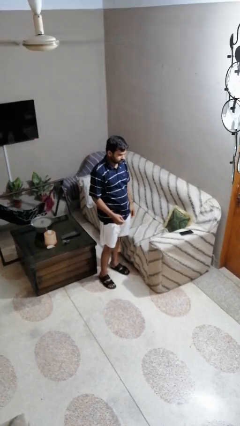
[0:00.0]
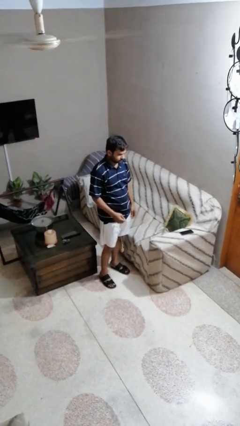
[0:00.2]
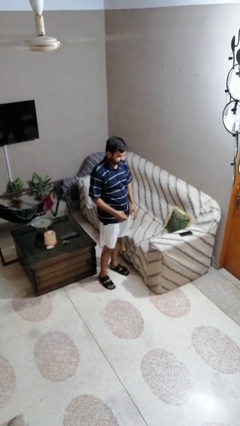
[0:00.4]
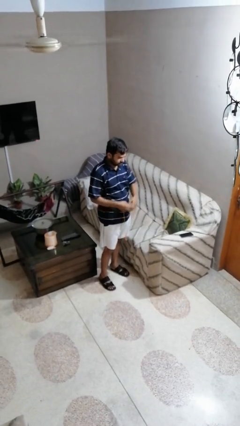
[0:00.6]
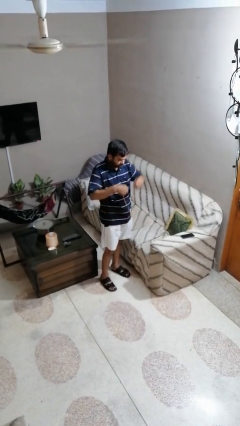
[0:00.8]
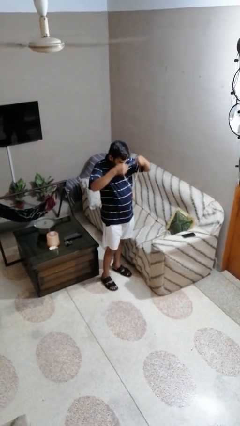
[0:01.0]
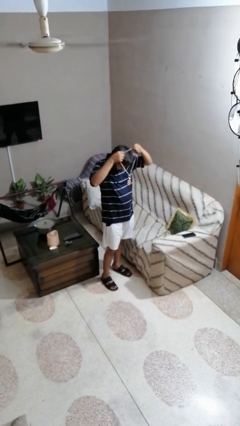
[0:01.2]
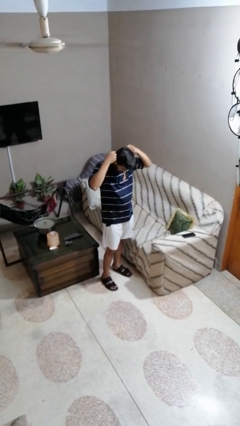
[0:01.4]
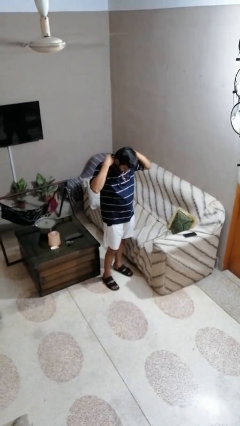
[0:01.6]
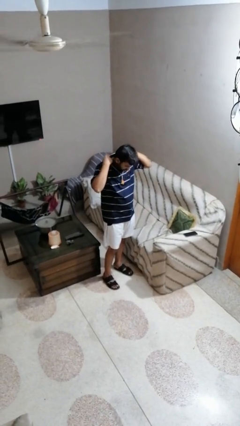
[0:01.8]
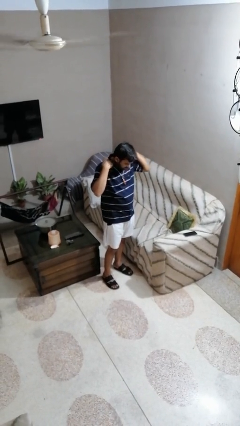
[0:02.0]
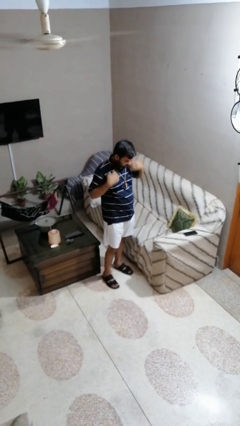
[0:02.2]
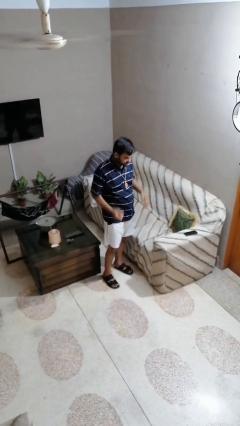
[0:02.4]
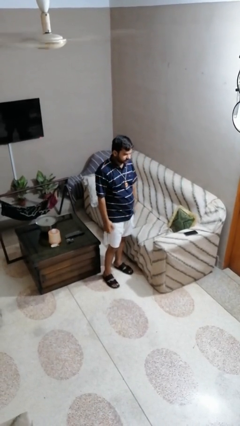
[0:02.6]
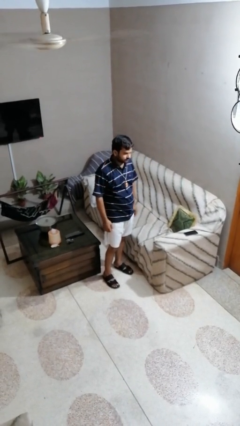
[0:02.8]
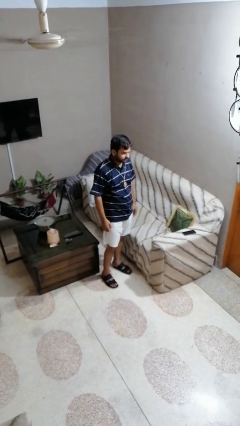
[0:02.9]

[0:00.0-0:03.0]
person puts on necklace

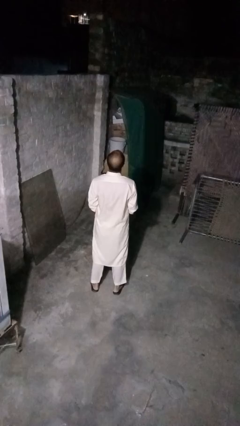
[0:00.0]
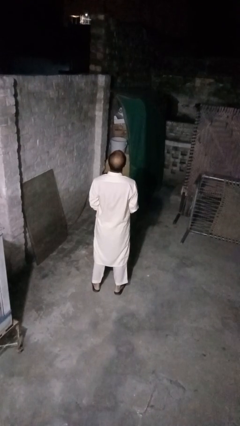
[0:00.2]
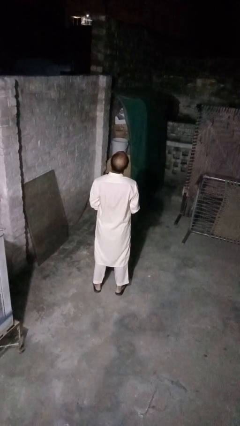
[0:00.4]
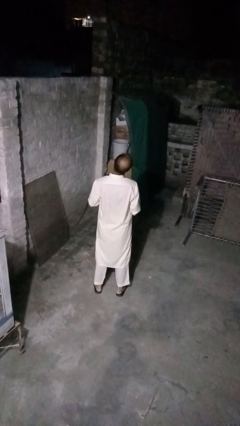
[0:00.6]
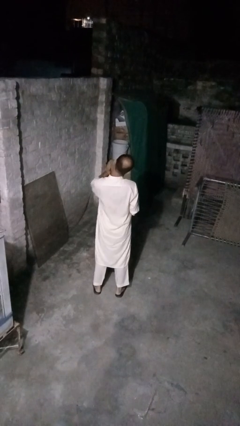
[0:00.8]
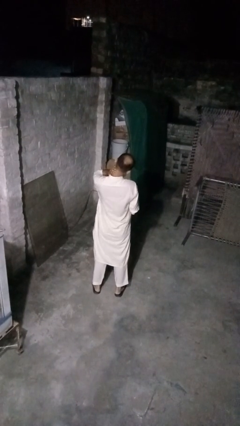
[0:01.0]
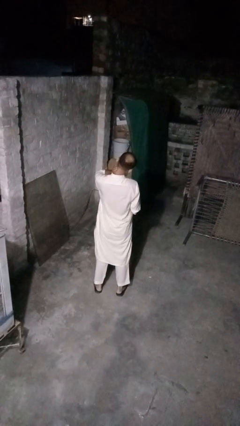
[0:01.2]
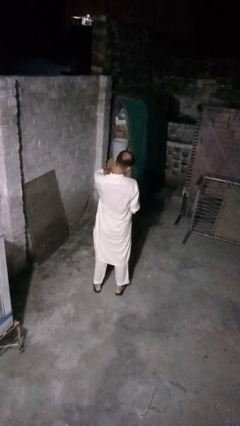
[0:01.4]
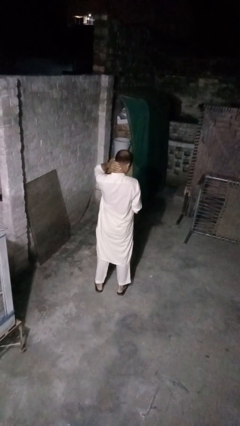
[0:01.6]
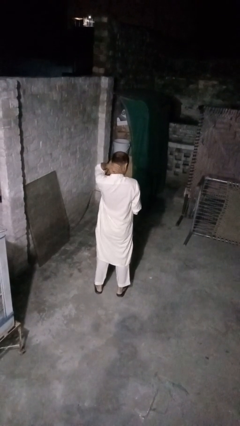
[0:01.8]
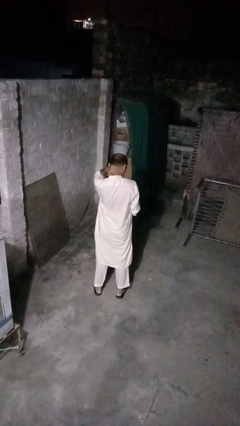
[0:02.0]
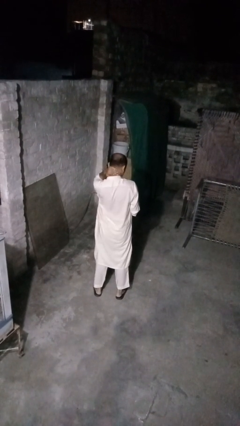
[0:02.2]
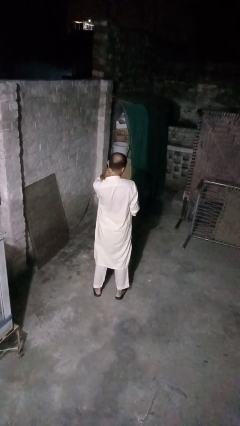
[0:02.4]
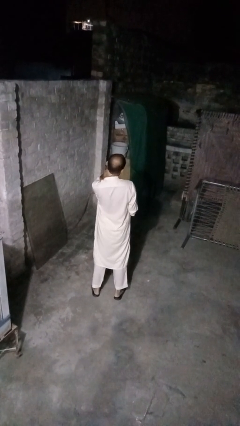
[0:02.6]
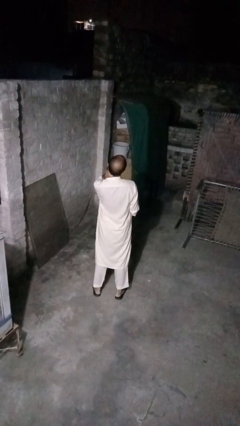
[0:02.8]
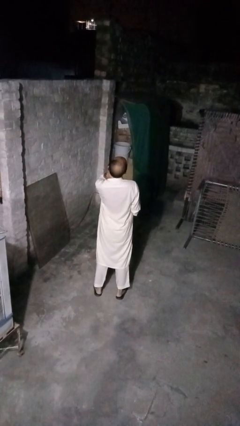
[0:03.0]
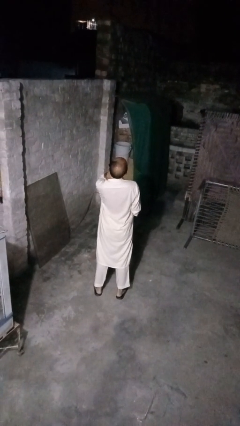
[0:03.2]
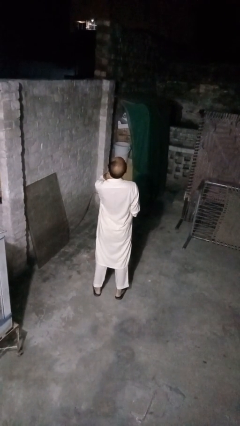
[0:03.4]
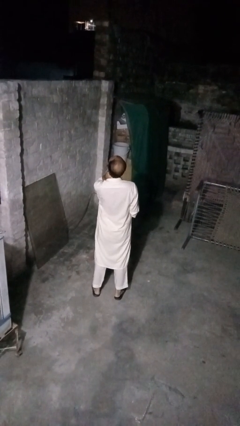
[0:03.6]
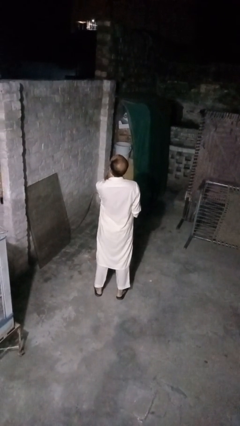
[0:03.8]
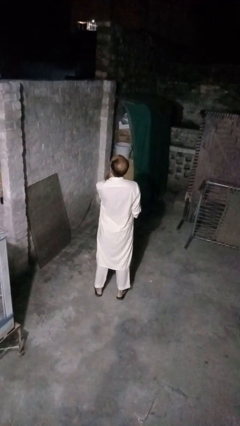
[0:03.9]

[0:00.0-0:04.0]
person rubs neck

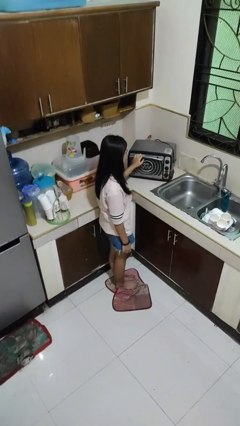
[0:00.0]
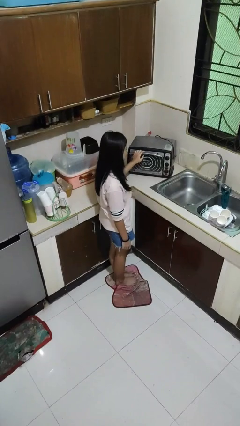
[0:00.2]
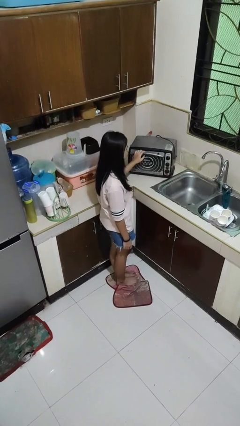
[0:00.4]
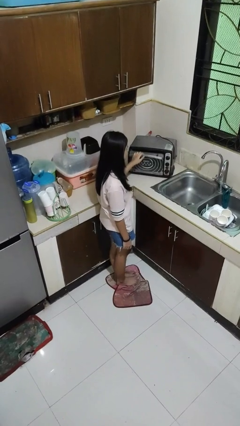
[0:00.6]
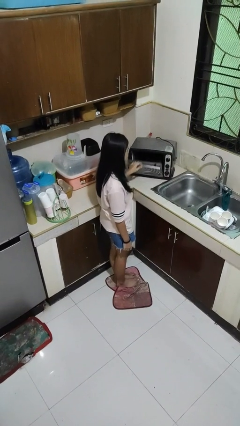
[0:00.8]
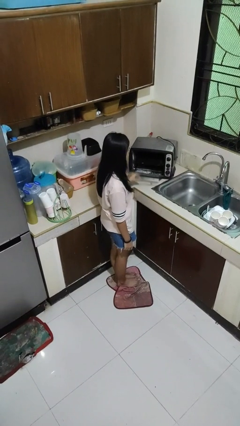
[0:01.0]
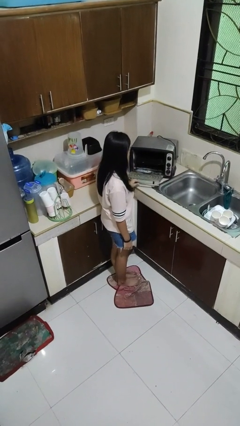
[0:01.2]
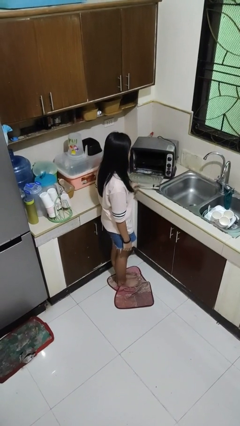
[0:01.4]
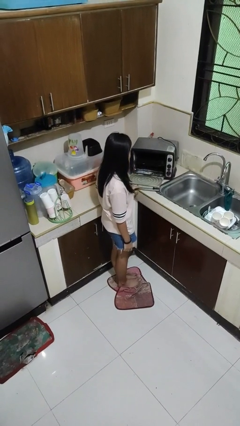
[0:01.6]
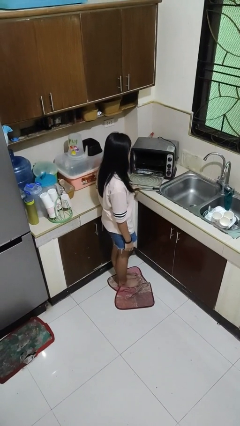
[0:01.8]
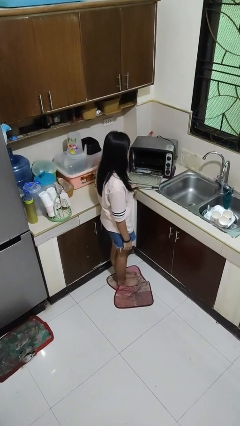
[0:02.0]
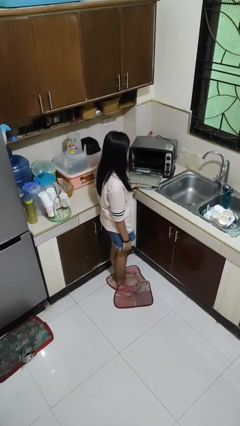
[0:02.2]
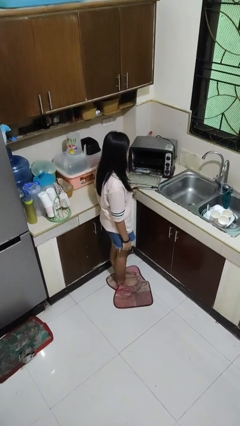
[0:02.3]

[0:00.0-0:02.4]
person opens microwave

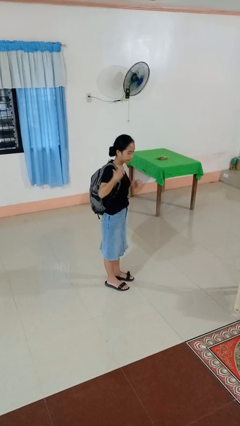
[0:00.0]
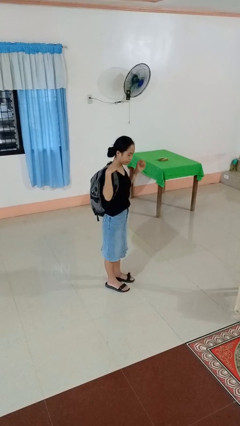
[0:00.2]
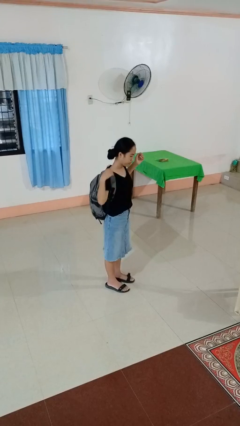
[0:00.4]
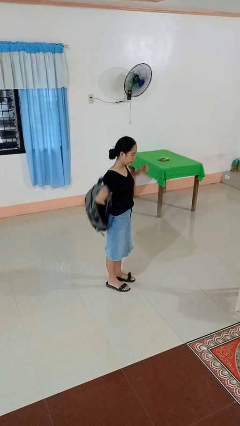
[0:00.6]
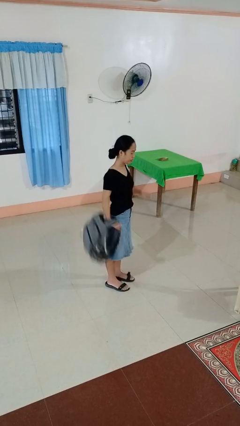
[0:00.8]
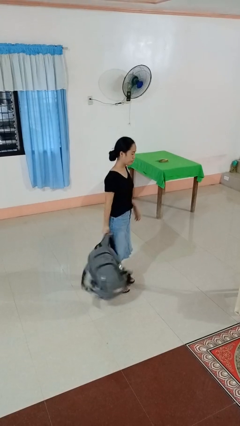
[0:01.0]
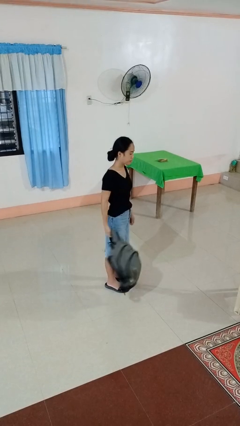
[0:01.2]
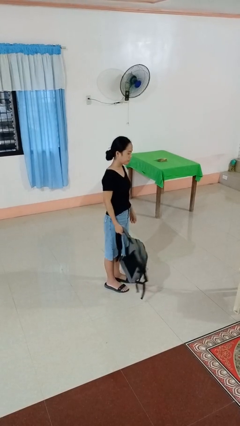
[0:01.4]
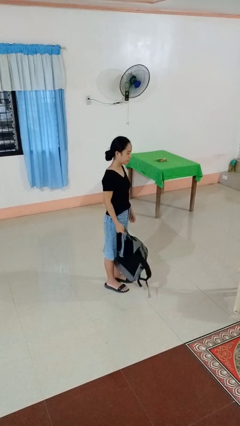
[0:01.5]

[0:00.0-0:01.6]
person takes off backpack

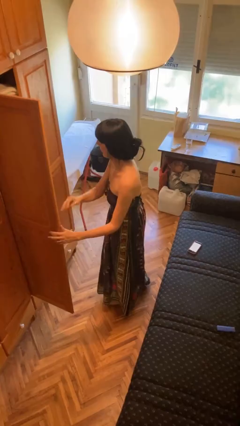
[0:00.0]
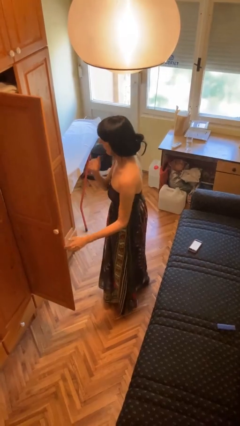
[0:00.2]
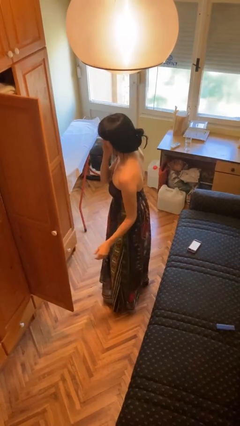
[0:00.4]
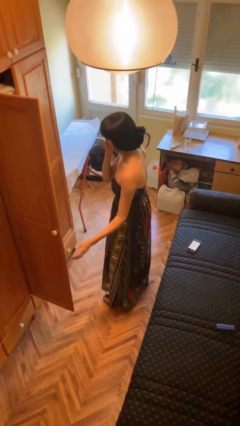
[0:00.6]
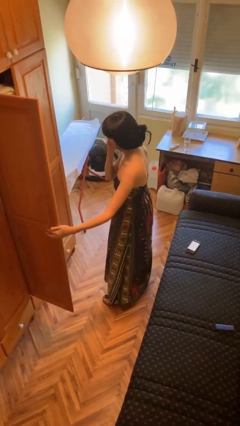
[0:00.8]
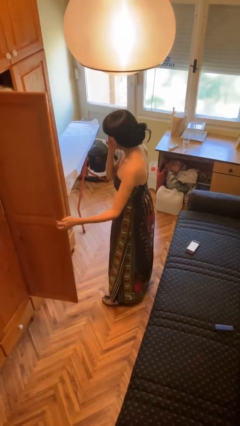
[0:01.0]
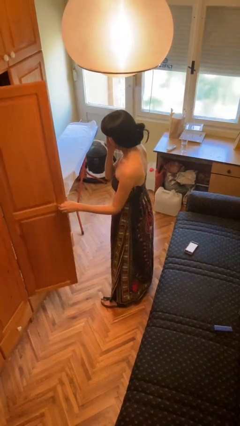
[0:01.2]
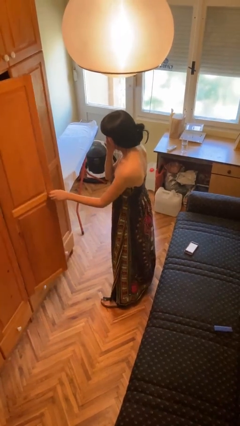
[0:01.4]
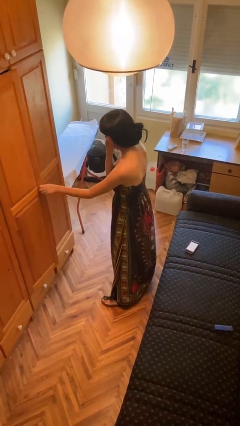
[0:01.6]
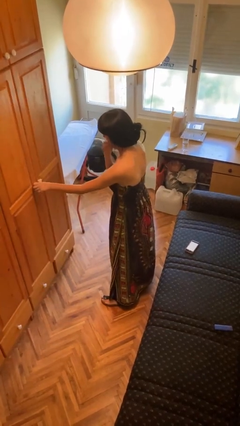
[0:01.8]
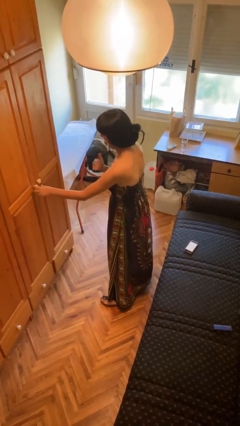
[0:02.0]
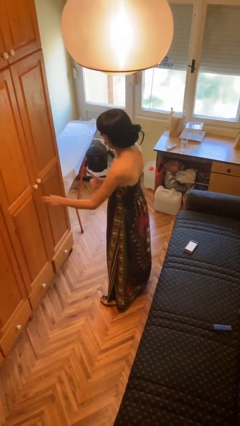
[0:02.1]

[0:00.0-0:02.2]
person closes closet door

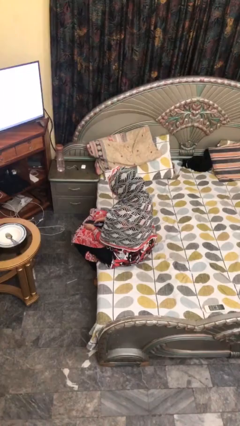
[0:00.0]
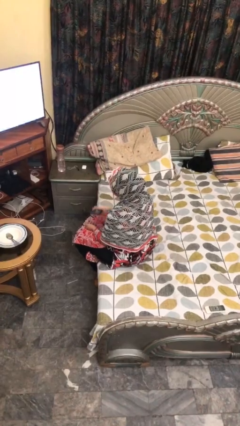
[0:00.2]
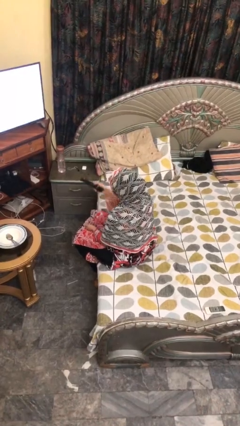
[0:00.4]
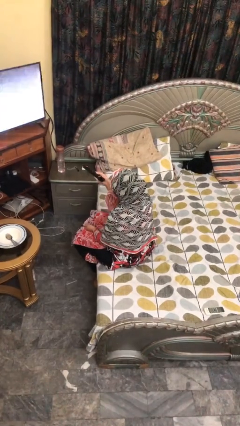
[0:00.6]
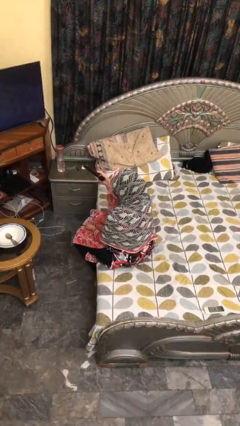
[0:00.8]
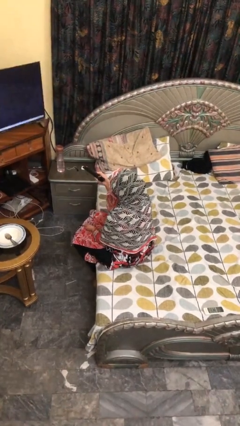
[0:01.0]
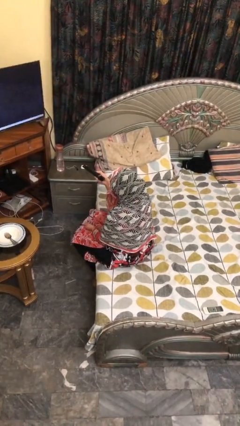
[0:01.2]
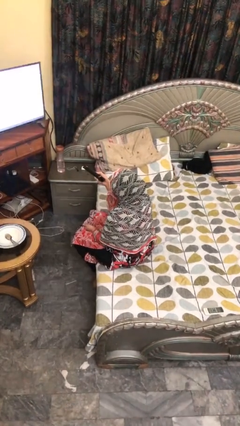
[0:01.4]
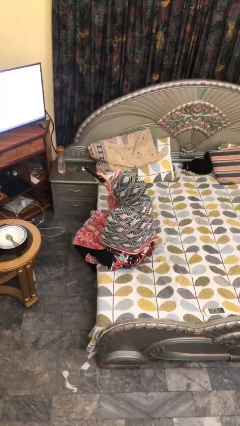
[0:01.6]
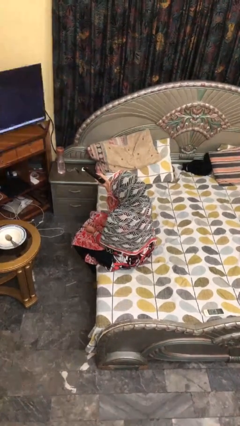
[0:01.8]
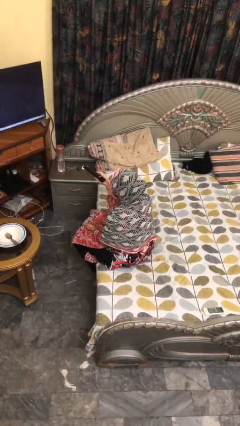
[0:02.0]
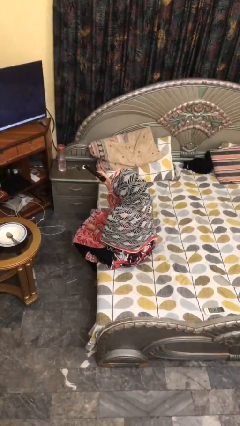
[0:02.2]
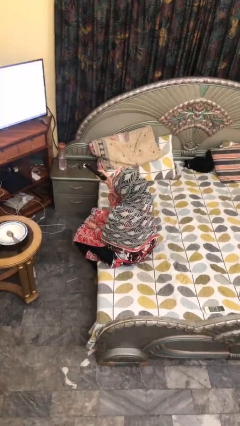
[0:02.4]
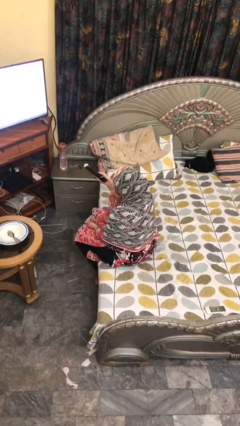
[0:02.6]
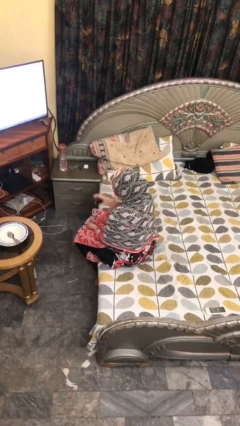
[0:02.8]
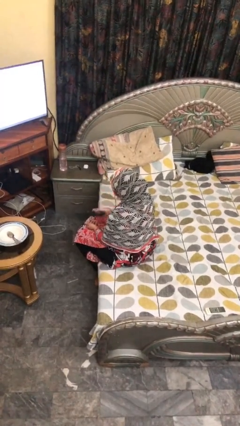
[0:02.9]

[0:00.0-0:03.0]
person uses television remote

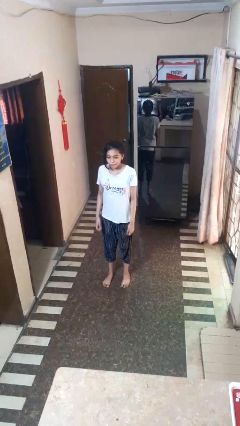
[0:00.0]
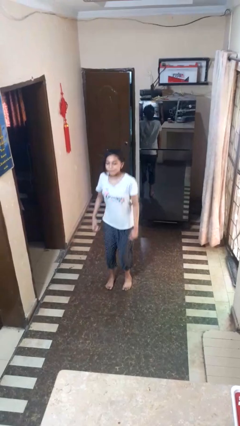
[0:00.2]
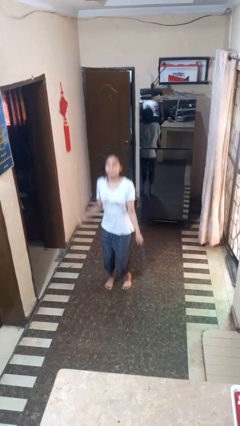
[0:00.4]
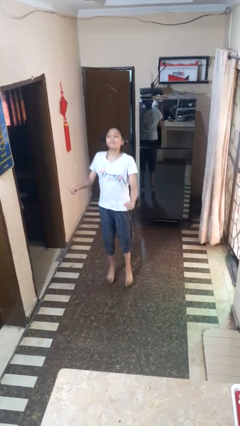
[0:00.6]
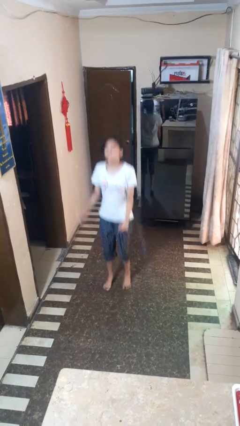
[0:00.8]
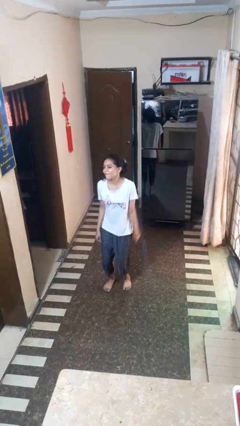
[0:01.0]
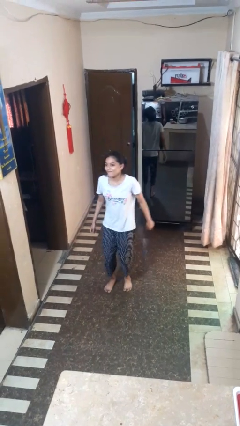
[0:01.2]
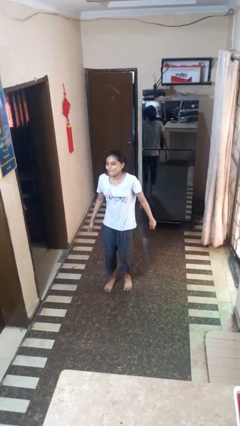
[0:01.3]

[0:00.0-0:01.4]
person jumps
